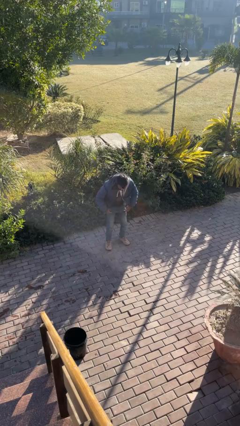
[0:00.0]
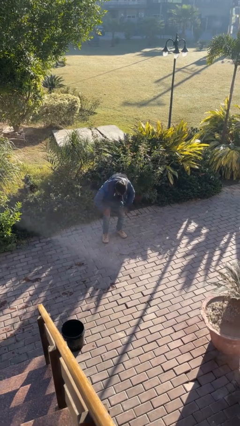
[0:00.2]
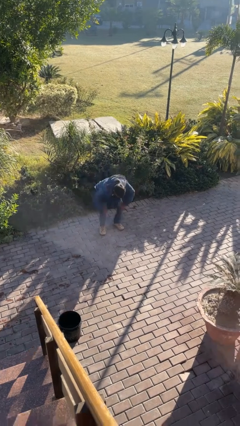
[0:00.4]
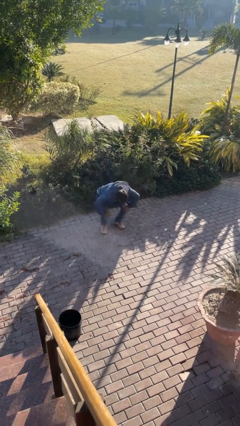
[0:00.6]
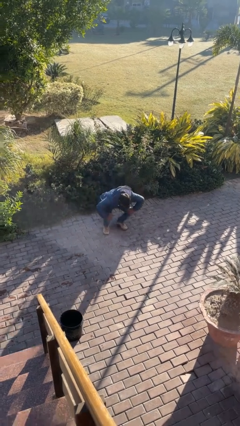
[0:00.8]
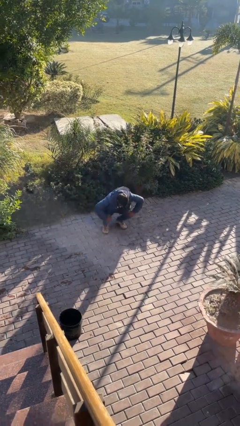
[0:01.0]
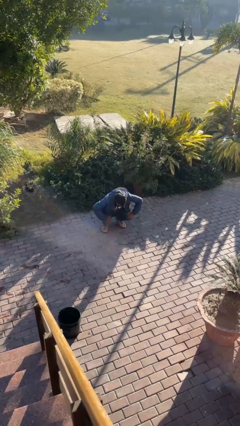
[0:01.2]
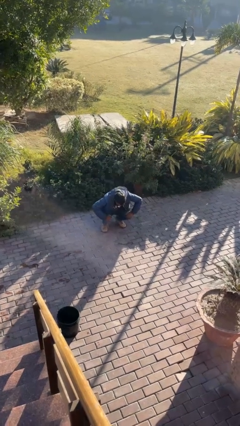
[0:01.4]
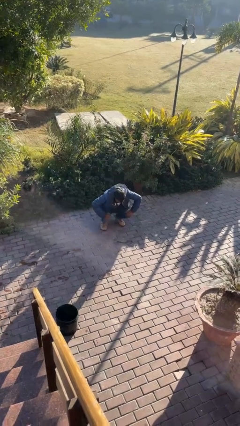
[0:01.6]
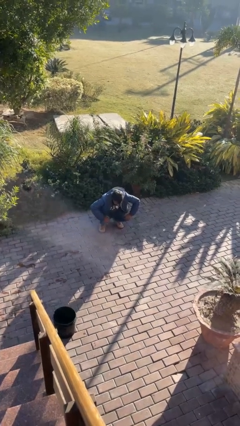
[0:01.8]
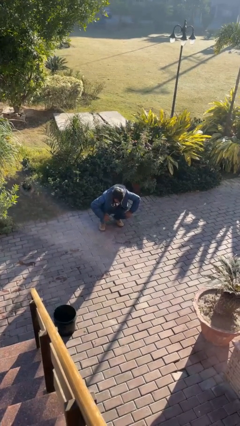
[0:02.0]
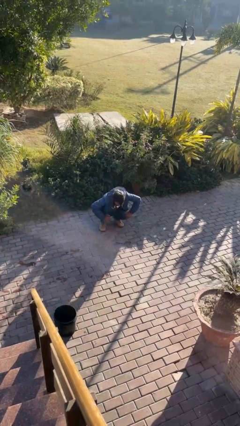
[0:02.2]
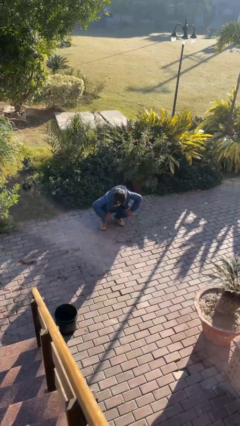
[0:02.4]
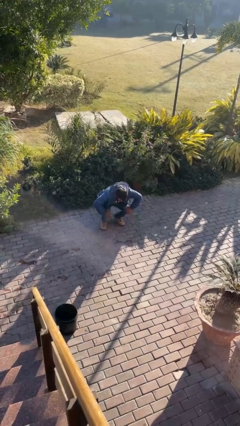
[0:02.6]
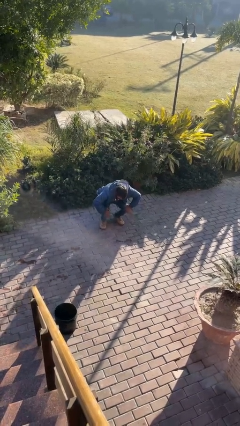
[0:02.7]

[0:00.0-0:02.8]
person sits down

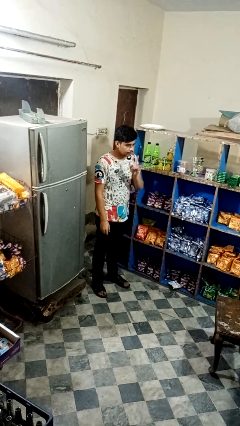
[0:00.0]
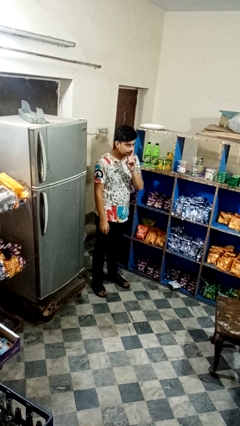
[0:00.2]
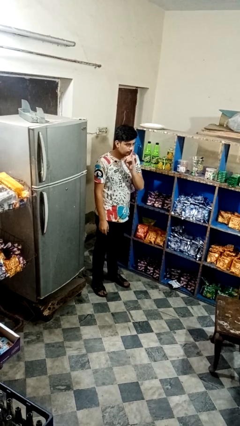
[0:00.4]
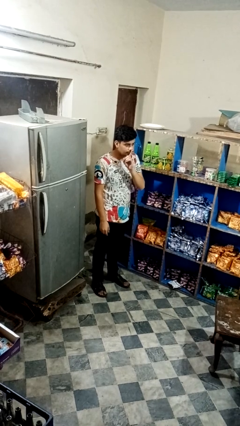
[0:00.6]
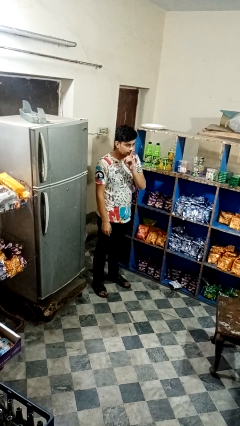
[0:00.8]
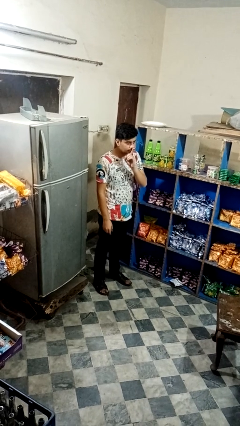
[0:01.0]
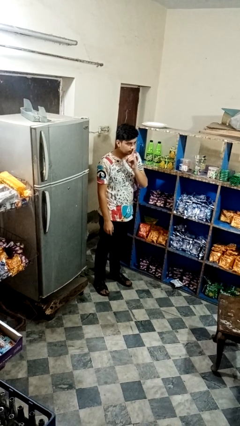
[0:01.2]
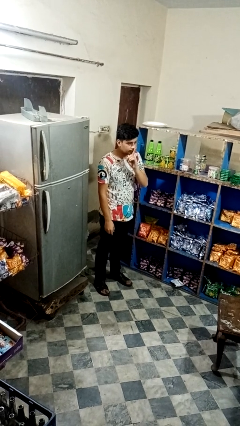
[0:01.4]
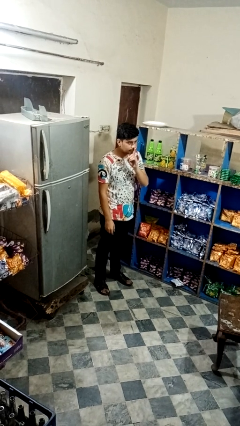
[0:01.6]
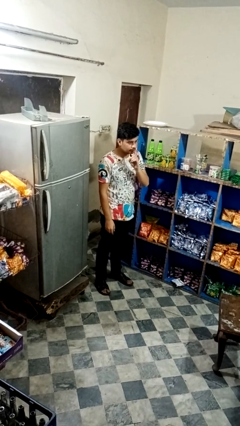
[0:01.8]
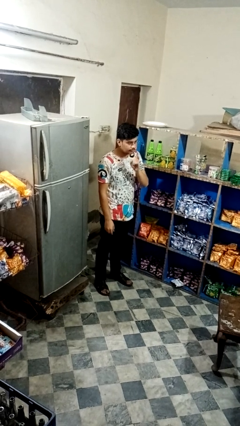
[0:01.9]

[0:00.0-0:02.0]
person gestures be quiet

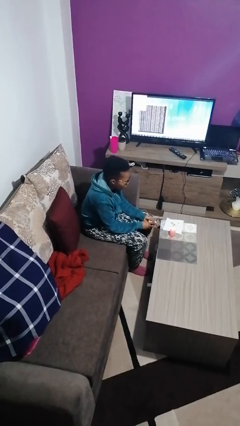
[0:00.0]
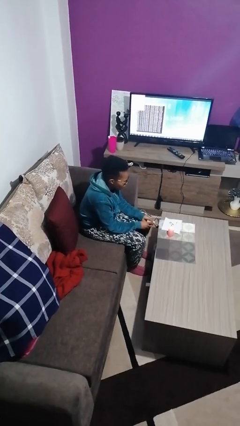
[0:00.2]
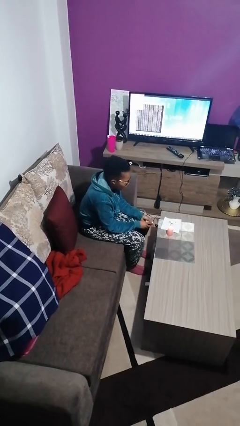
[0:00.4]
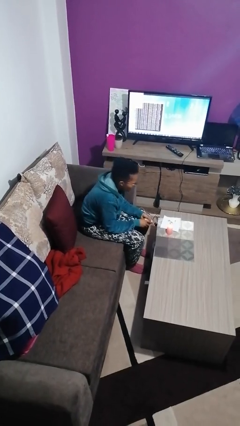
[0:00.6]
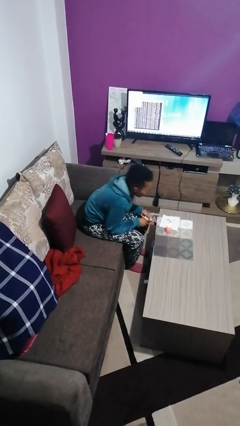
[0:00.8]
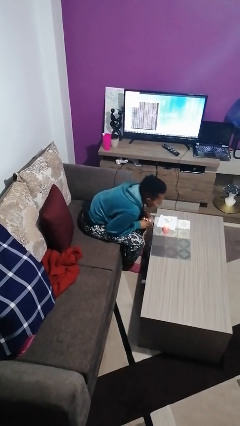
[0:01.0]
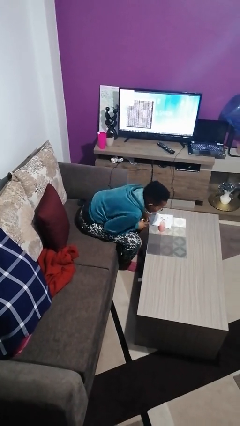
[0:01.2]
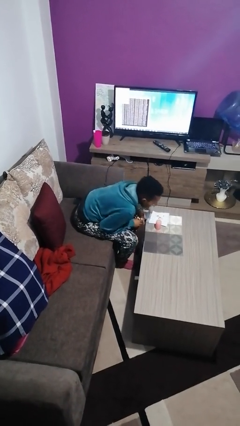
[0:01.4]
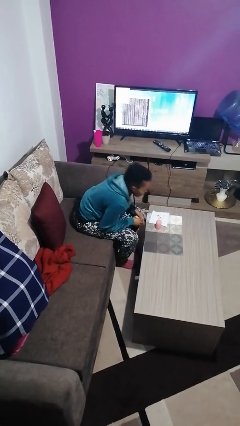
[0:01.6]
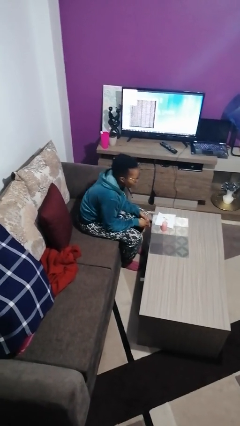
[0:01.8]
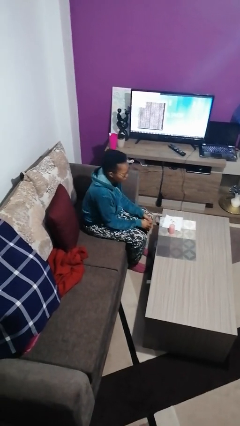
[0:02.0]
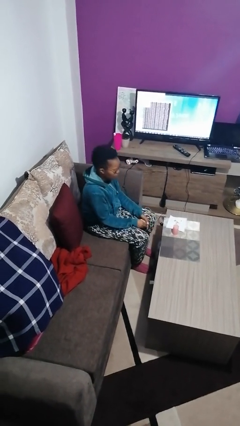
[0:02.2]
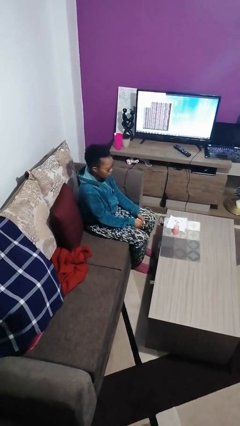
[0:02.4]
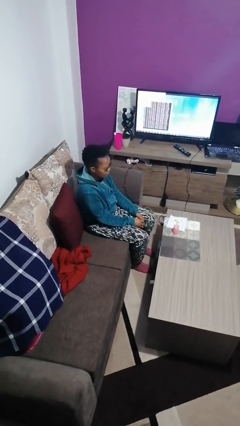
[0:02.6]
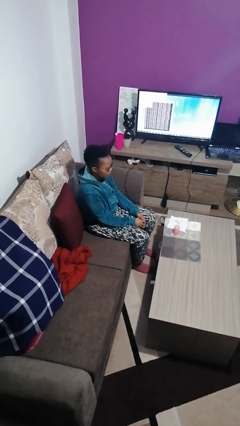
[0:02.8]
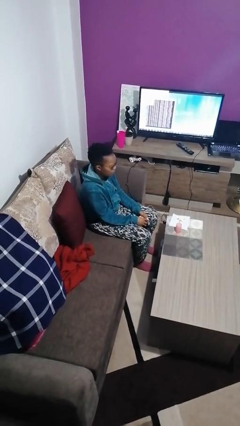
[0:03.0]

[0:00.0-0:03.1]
person extinguishes candle

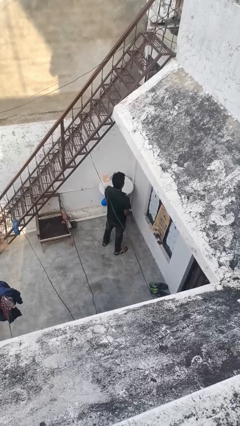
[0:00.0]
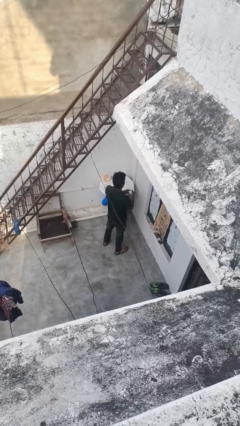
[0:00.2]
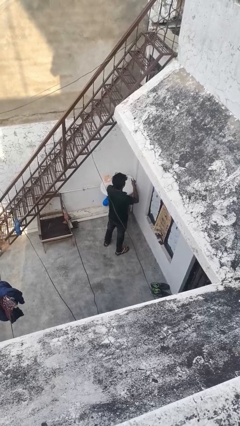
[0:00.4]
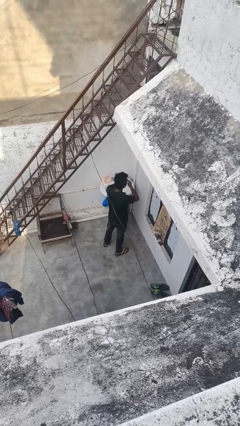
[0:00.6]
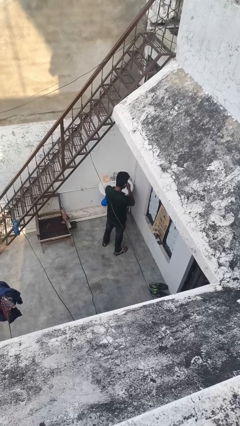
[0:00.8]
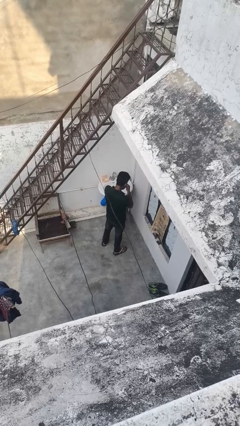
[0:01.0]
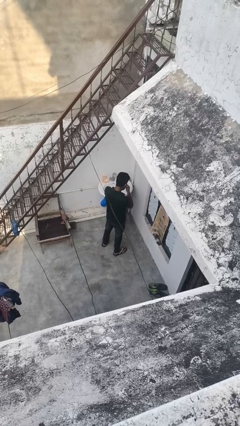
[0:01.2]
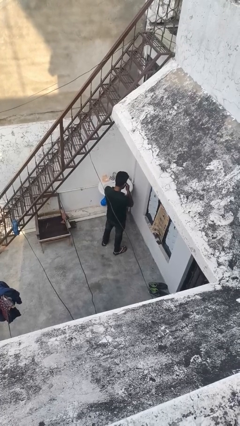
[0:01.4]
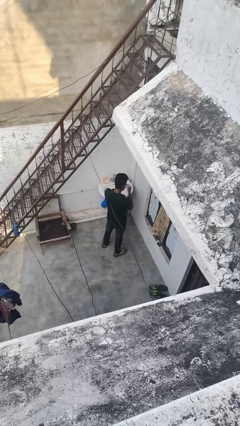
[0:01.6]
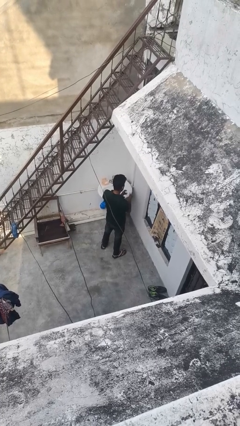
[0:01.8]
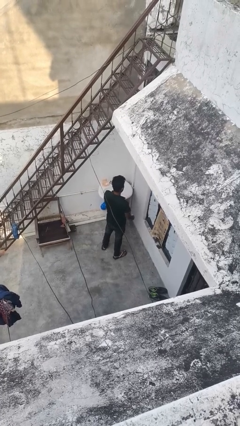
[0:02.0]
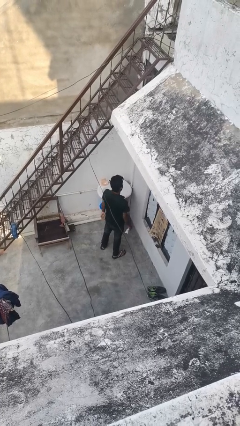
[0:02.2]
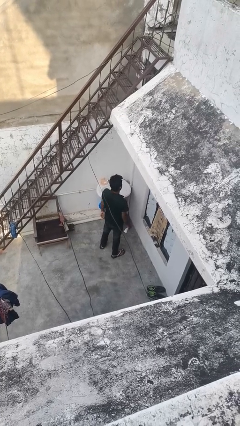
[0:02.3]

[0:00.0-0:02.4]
person blows nose

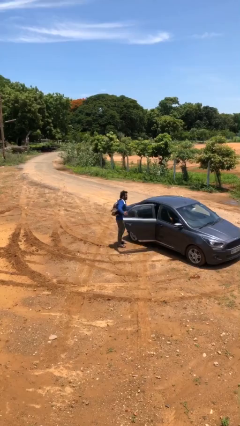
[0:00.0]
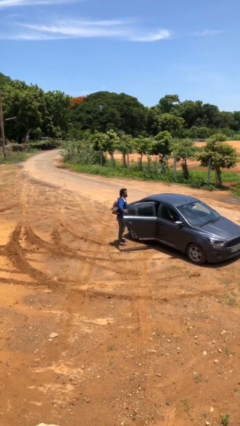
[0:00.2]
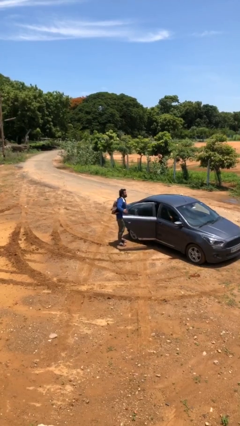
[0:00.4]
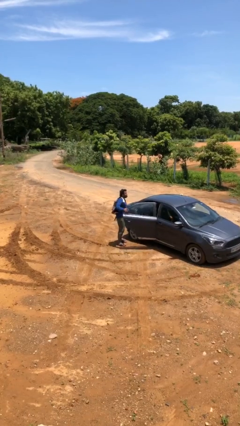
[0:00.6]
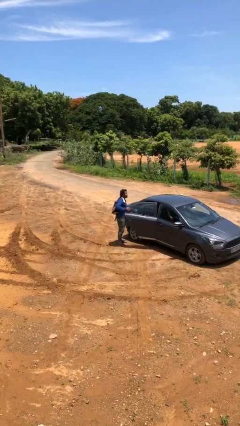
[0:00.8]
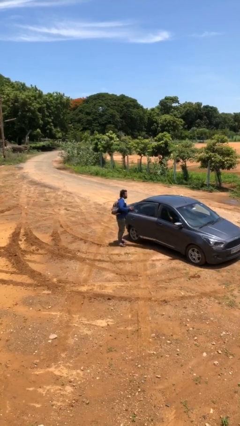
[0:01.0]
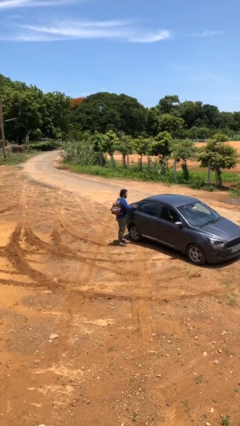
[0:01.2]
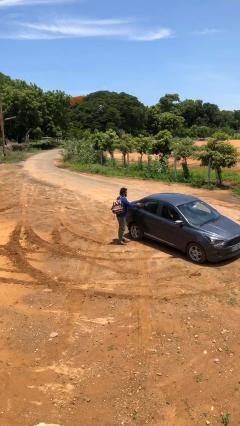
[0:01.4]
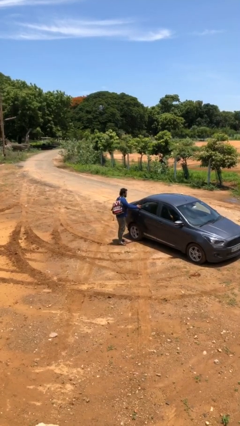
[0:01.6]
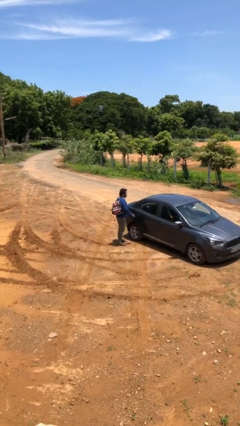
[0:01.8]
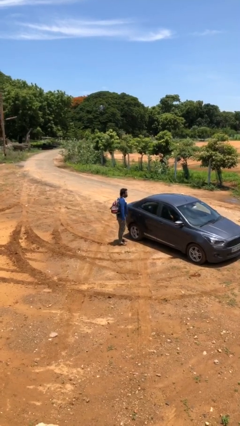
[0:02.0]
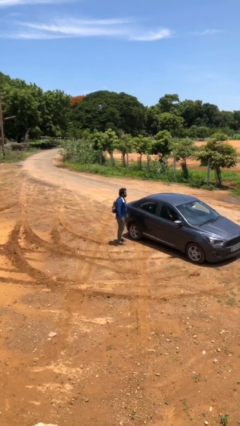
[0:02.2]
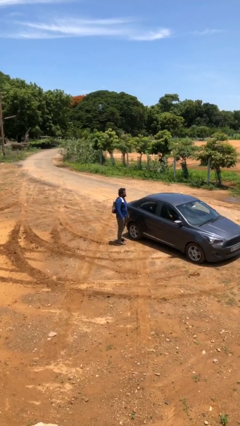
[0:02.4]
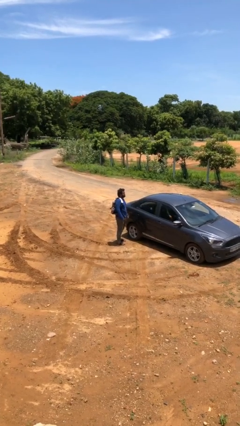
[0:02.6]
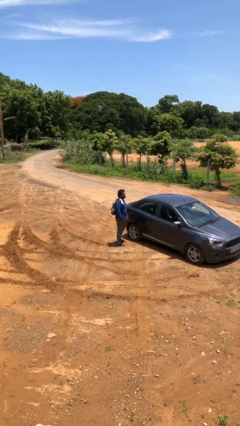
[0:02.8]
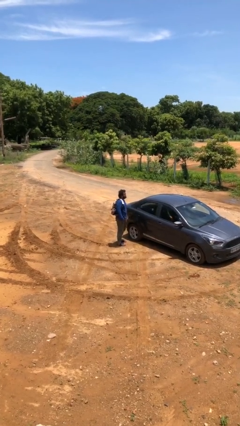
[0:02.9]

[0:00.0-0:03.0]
person closes car door

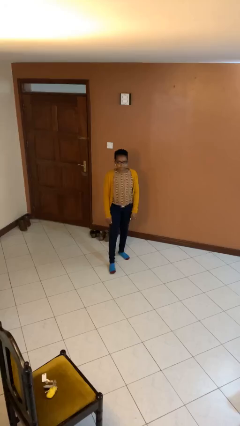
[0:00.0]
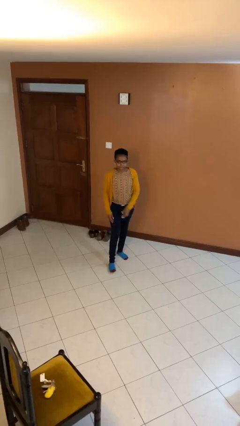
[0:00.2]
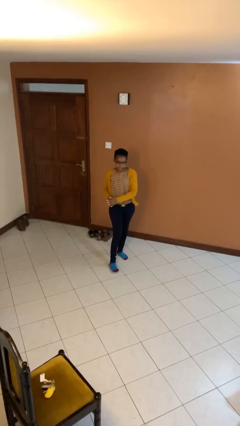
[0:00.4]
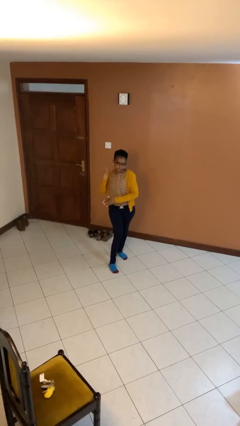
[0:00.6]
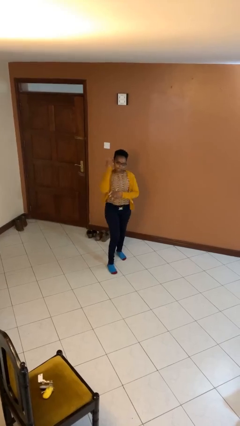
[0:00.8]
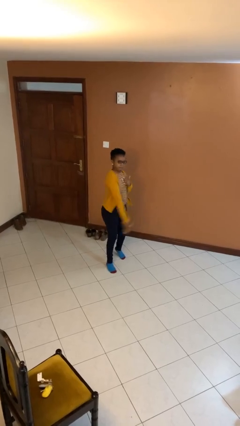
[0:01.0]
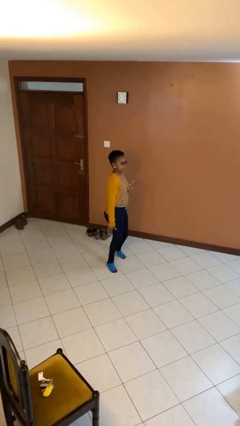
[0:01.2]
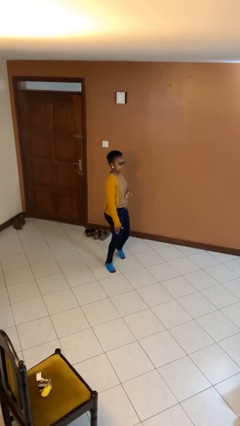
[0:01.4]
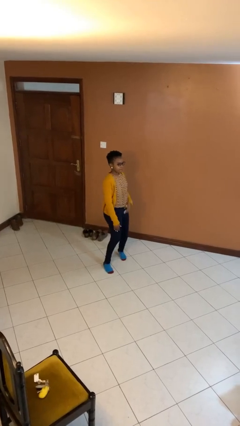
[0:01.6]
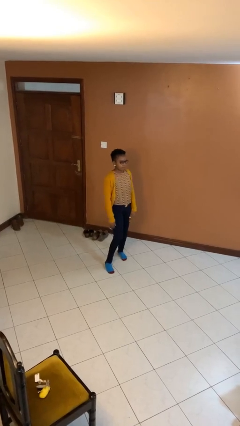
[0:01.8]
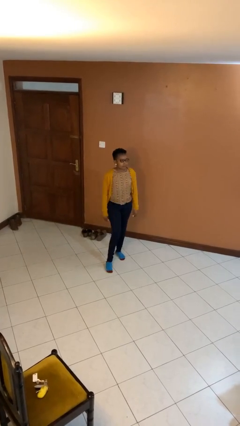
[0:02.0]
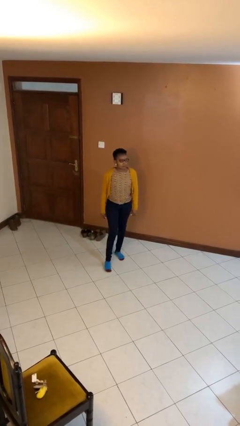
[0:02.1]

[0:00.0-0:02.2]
person karate chop

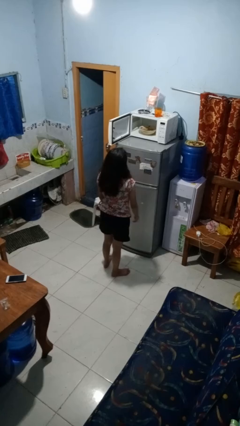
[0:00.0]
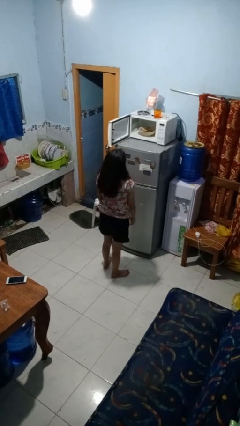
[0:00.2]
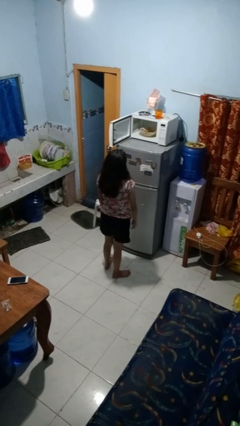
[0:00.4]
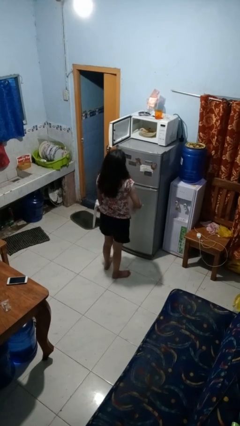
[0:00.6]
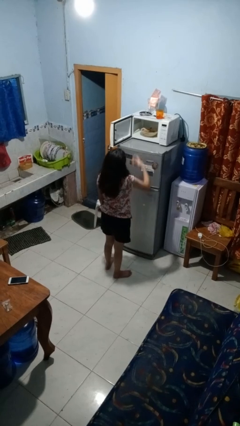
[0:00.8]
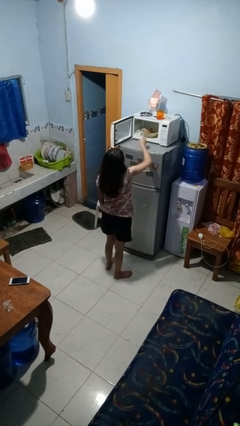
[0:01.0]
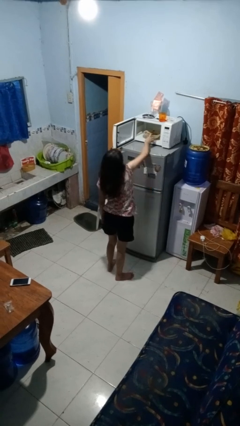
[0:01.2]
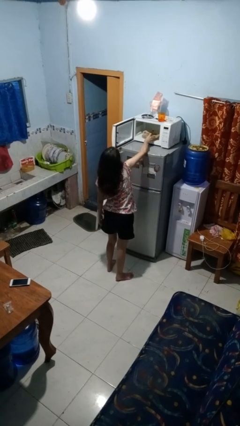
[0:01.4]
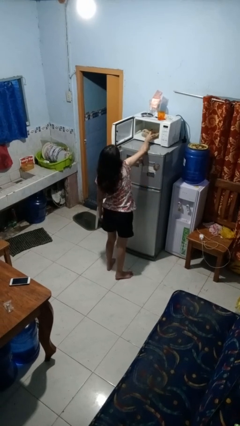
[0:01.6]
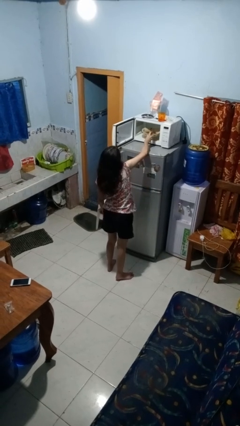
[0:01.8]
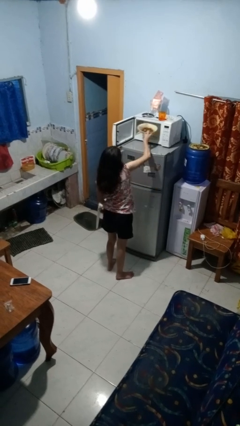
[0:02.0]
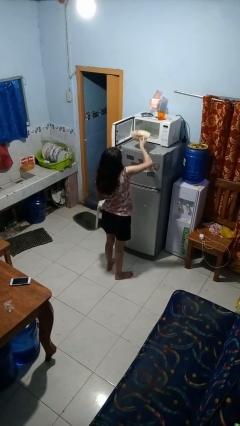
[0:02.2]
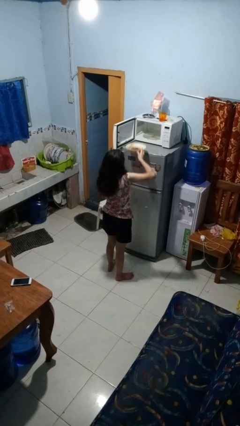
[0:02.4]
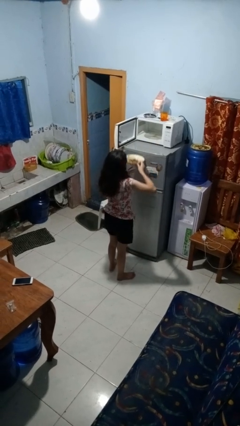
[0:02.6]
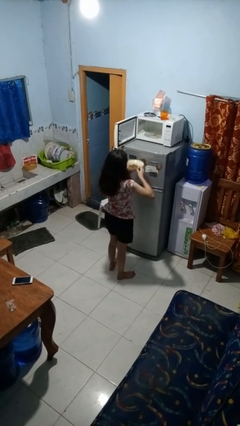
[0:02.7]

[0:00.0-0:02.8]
person takes object from microwave
